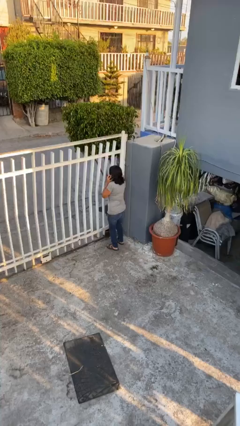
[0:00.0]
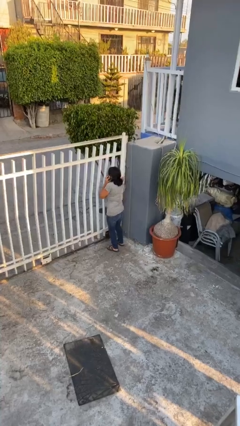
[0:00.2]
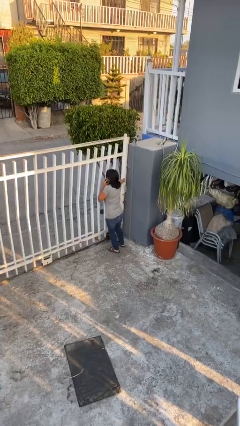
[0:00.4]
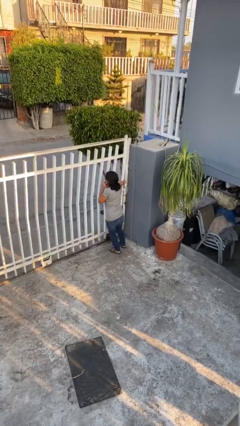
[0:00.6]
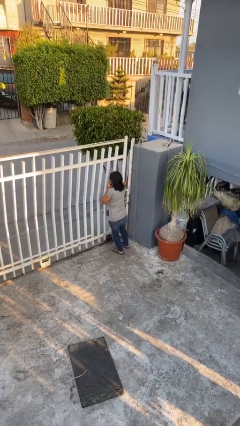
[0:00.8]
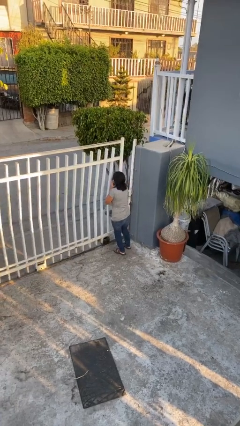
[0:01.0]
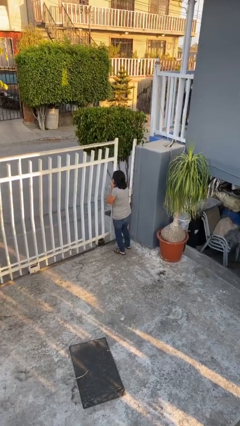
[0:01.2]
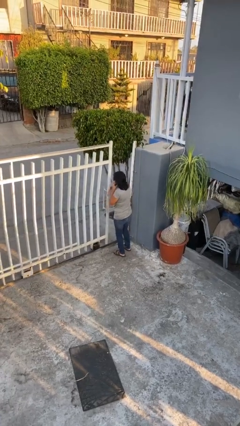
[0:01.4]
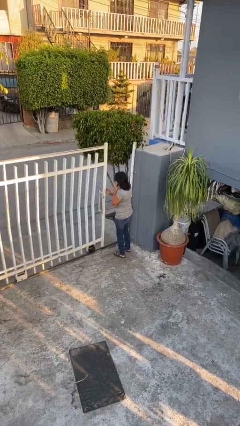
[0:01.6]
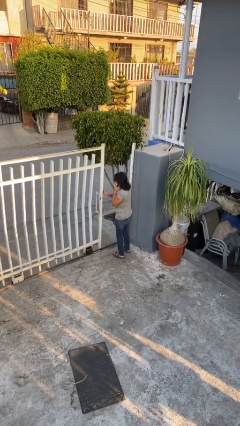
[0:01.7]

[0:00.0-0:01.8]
person opens facility door

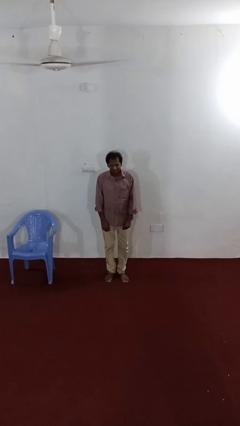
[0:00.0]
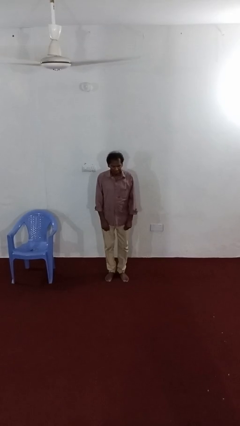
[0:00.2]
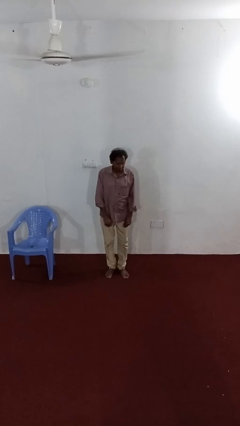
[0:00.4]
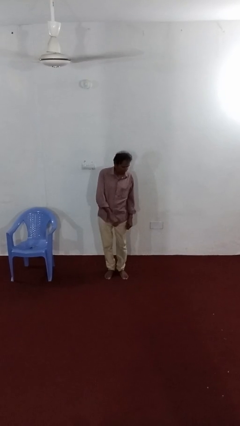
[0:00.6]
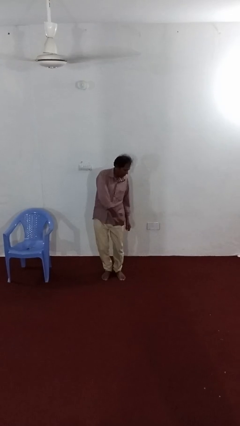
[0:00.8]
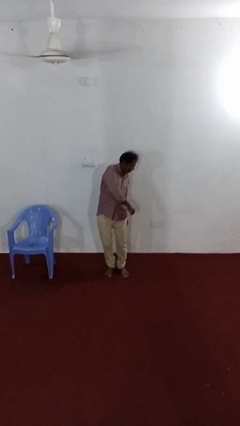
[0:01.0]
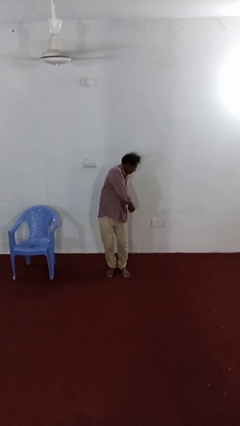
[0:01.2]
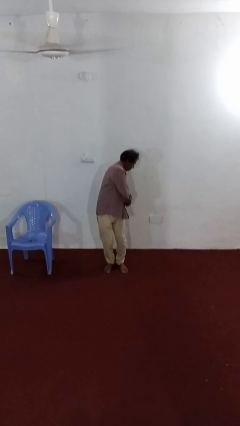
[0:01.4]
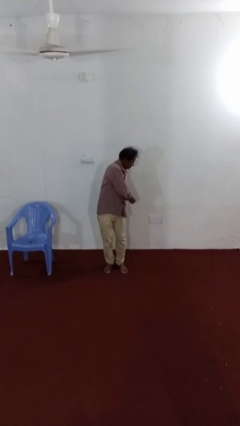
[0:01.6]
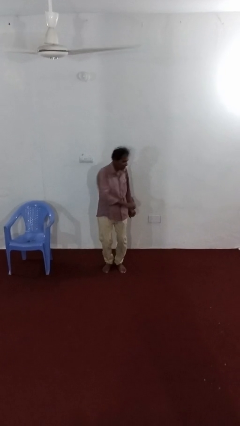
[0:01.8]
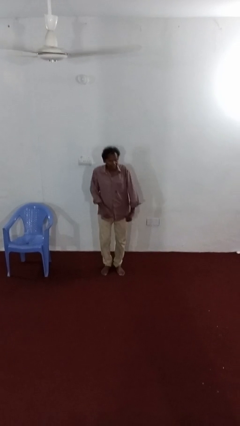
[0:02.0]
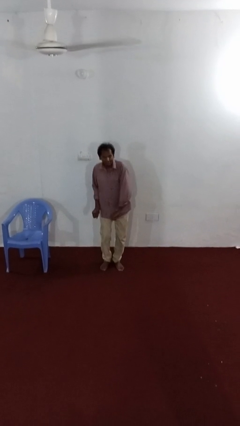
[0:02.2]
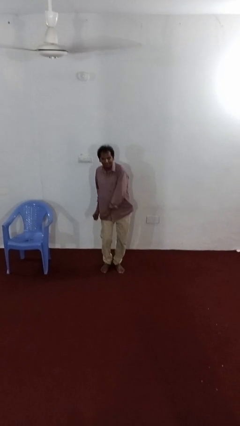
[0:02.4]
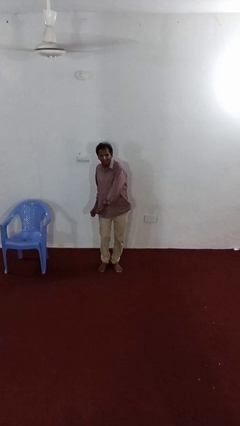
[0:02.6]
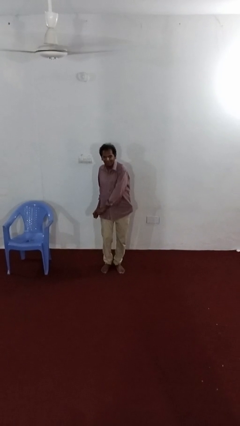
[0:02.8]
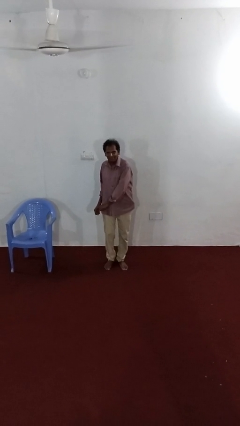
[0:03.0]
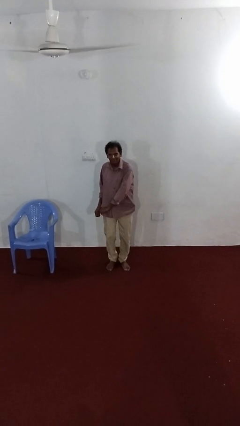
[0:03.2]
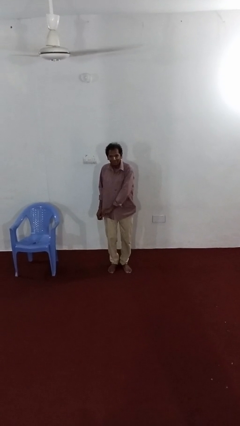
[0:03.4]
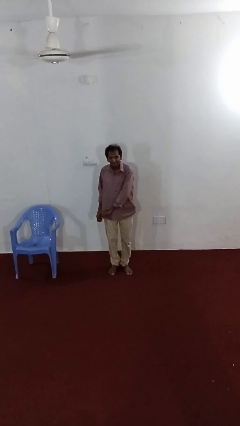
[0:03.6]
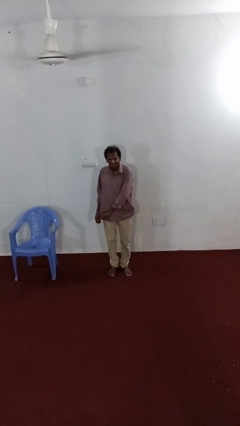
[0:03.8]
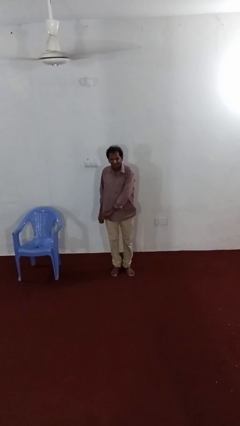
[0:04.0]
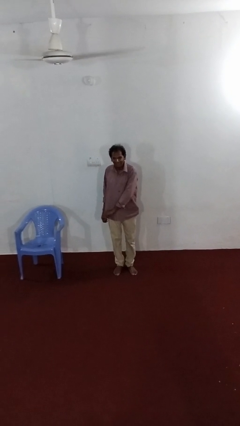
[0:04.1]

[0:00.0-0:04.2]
person dances in place

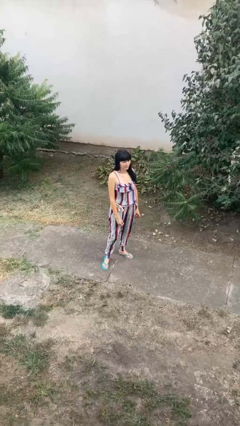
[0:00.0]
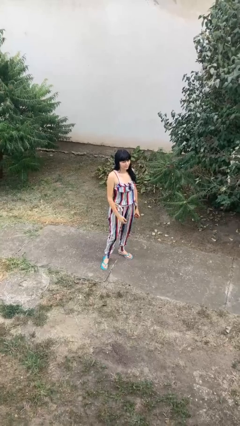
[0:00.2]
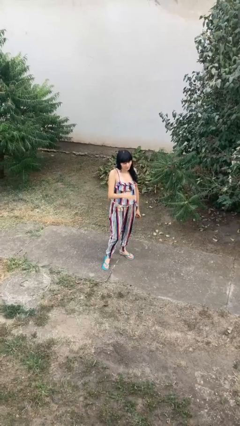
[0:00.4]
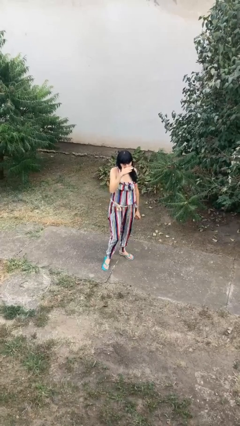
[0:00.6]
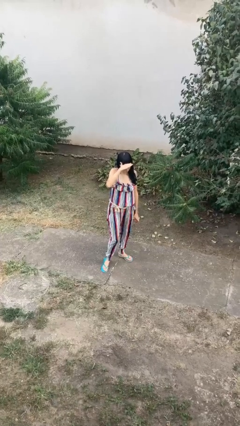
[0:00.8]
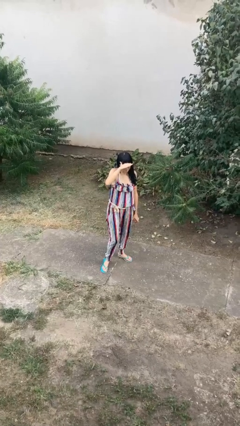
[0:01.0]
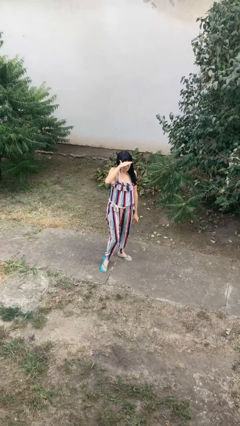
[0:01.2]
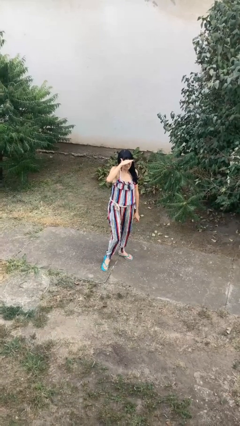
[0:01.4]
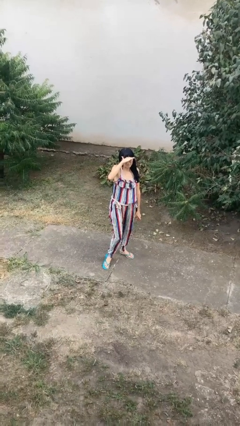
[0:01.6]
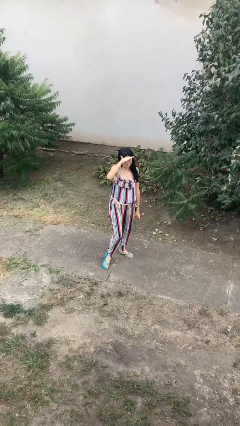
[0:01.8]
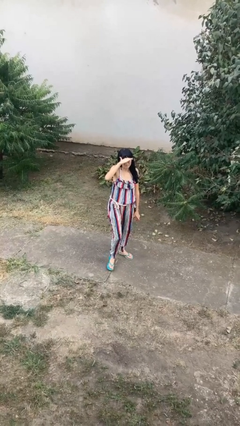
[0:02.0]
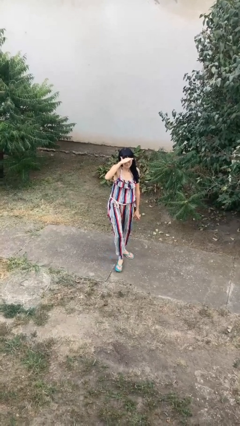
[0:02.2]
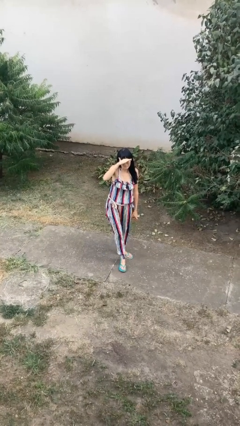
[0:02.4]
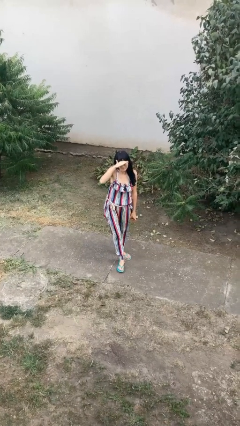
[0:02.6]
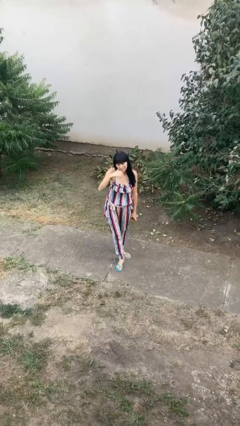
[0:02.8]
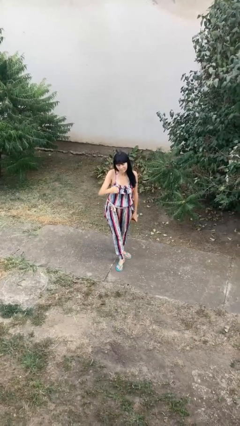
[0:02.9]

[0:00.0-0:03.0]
person shades eyes

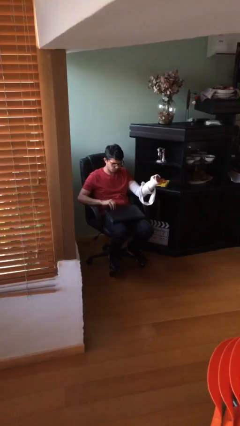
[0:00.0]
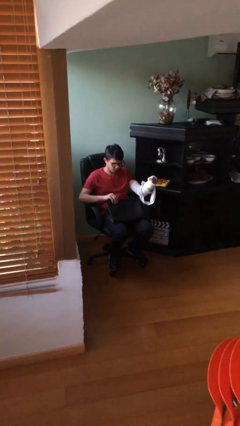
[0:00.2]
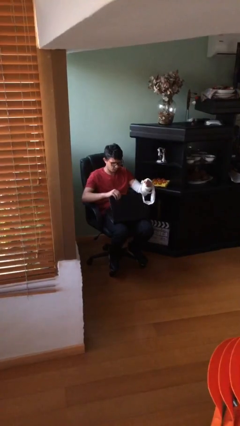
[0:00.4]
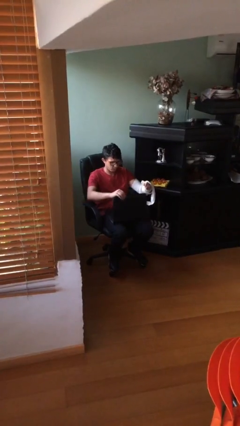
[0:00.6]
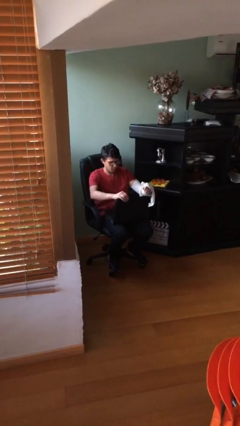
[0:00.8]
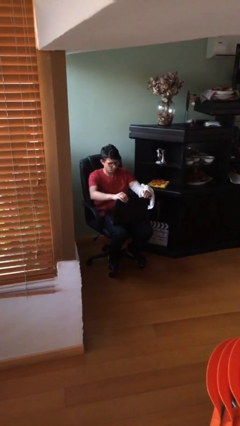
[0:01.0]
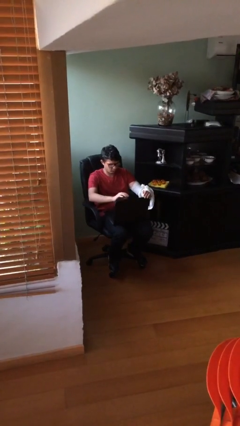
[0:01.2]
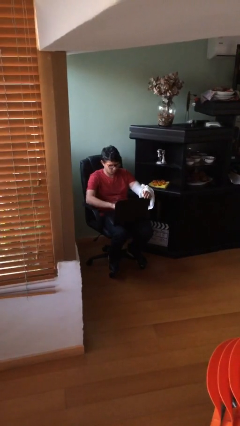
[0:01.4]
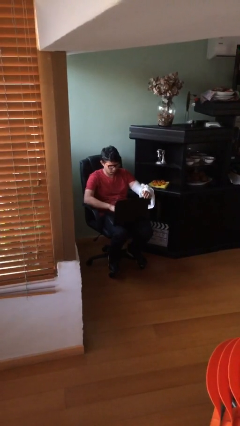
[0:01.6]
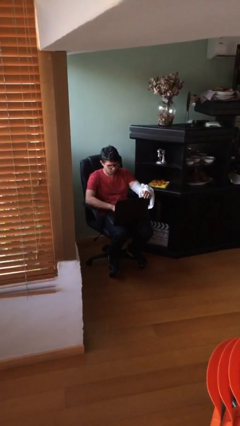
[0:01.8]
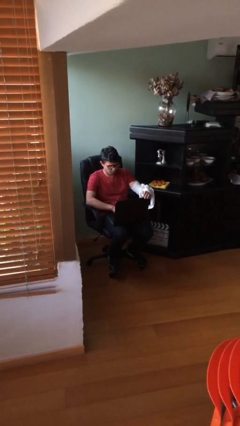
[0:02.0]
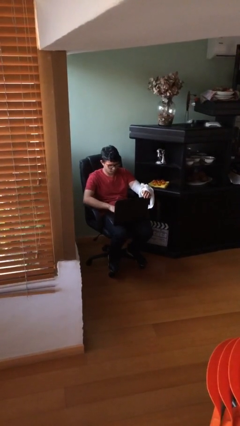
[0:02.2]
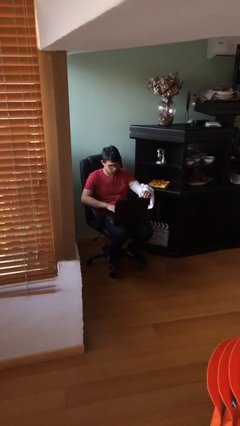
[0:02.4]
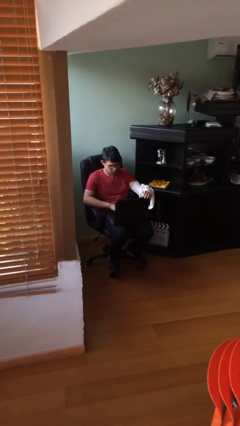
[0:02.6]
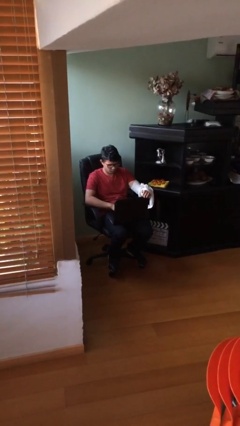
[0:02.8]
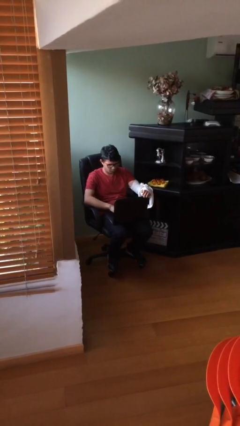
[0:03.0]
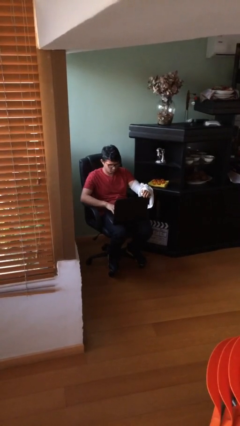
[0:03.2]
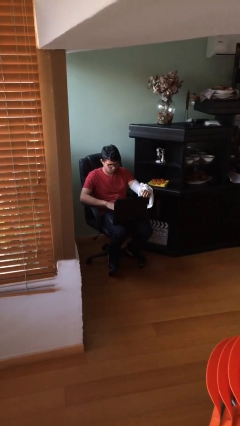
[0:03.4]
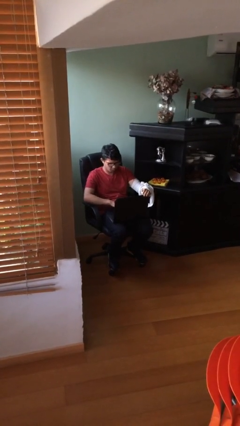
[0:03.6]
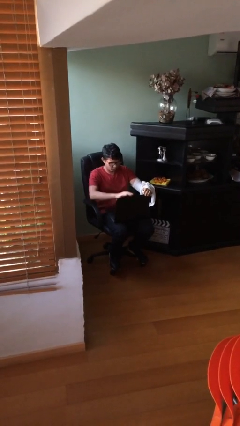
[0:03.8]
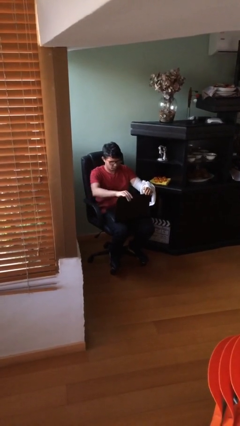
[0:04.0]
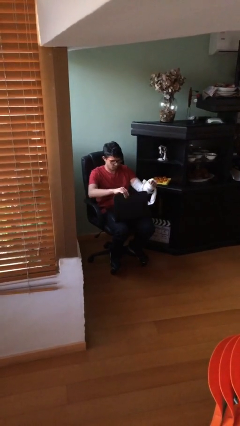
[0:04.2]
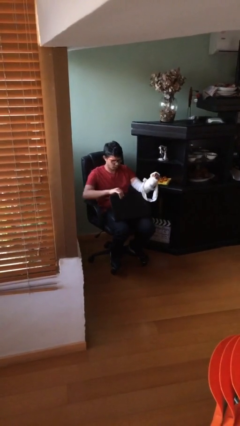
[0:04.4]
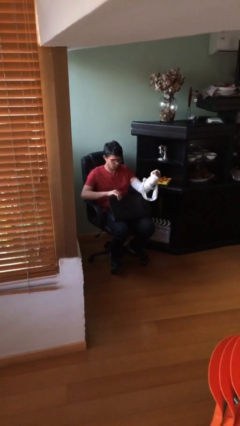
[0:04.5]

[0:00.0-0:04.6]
person interacts with laptop

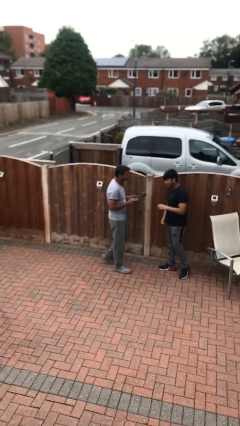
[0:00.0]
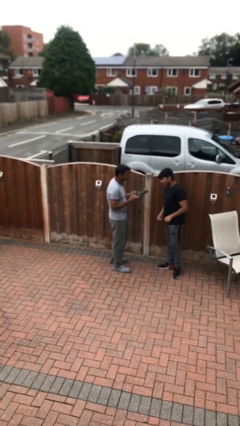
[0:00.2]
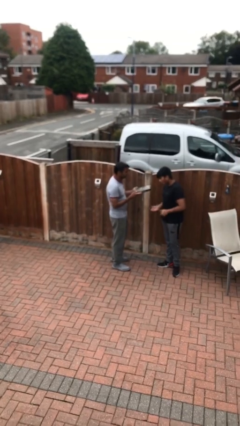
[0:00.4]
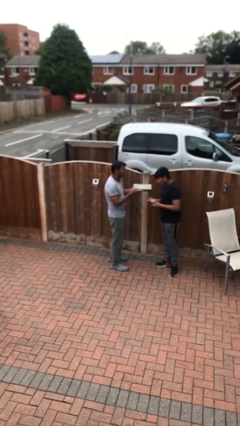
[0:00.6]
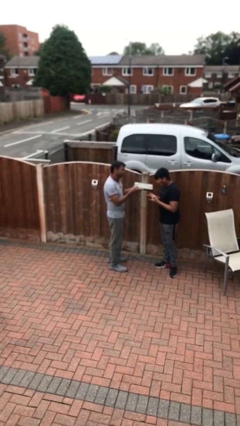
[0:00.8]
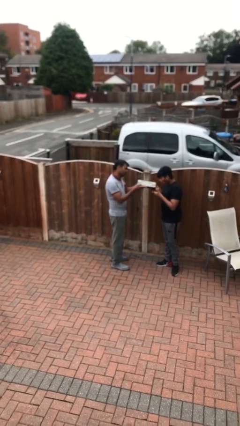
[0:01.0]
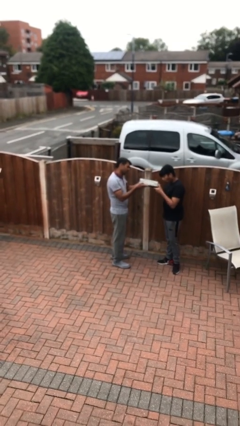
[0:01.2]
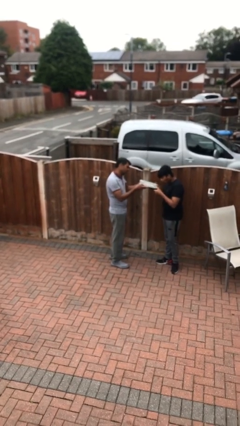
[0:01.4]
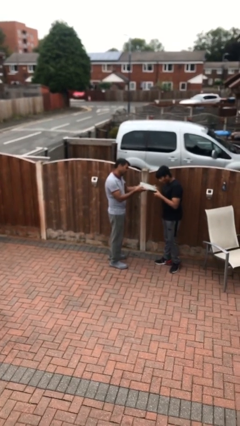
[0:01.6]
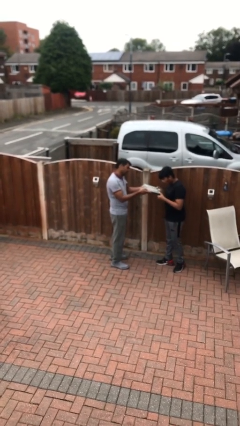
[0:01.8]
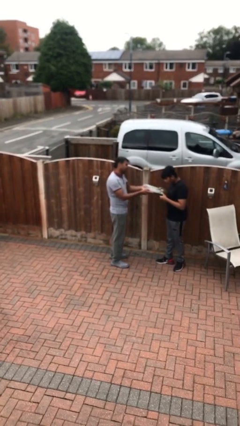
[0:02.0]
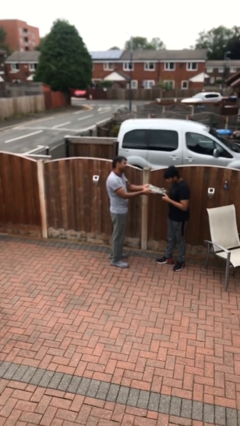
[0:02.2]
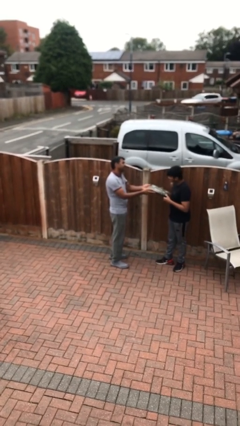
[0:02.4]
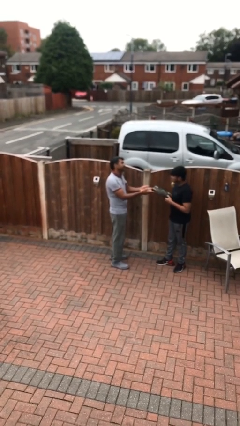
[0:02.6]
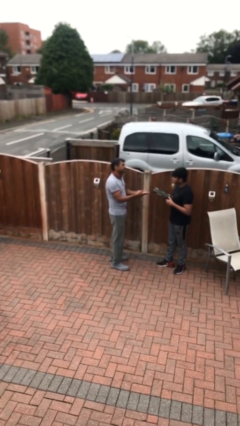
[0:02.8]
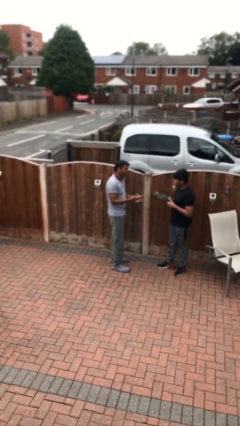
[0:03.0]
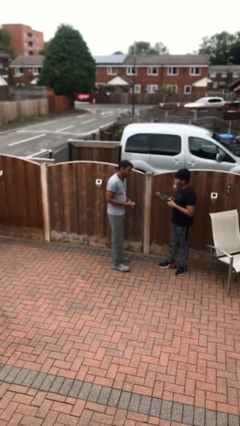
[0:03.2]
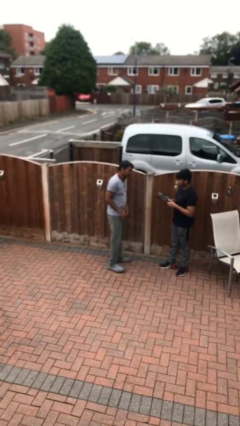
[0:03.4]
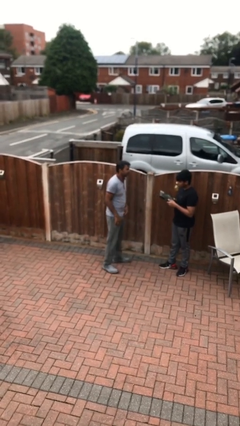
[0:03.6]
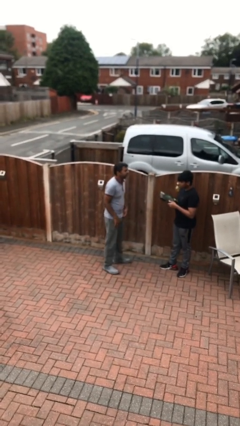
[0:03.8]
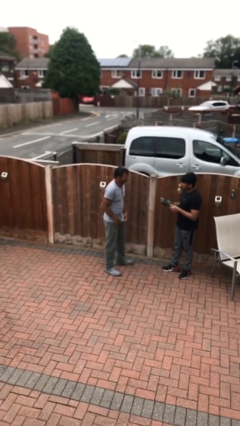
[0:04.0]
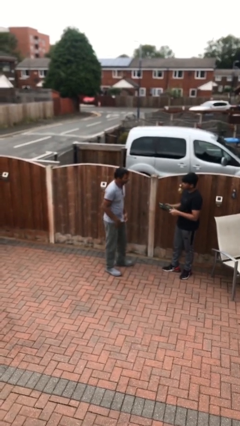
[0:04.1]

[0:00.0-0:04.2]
person transfers object to person
